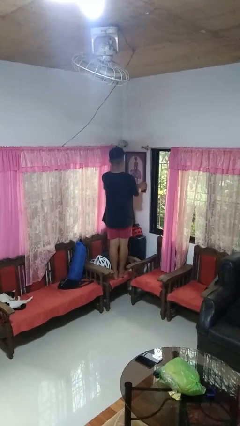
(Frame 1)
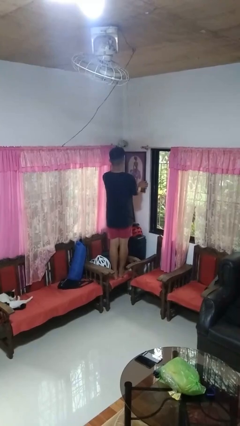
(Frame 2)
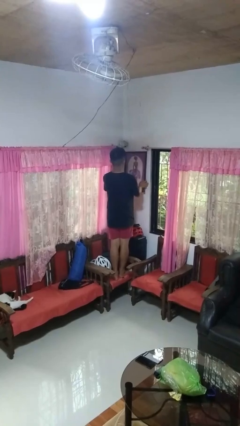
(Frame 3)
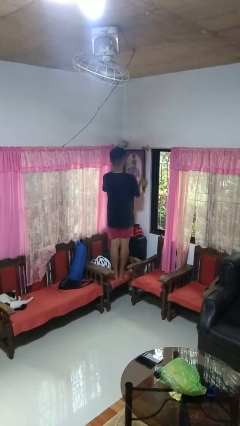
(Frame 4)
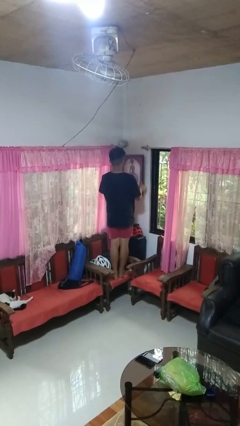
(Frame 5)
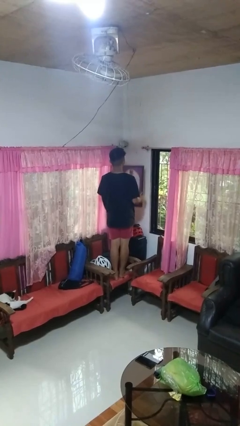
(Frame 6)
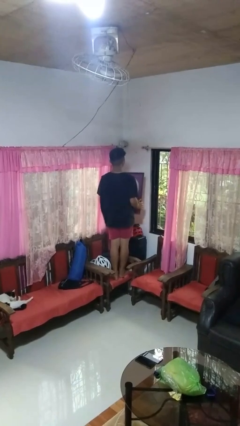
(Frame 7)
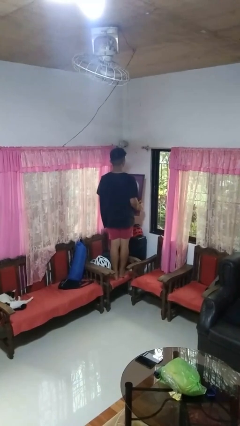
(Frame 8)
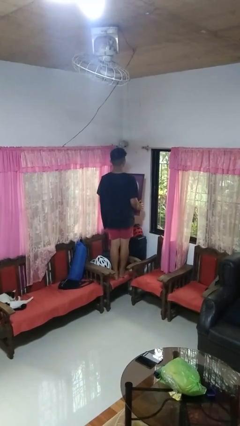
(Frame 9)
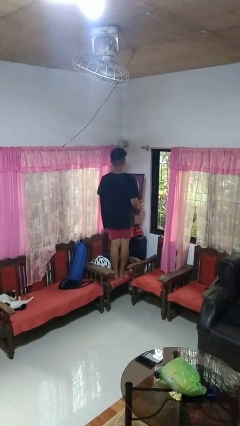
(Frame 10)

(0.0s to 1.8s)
person takes down picture frame

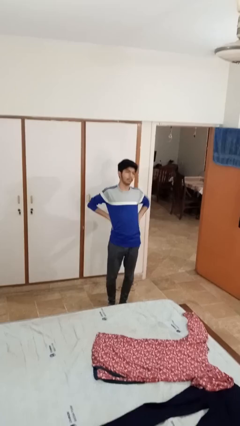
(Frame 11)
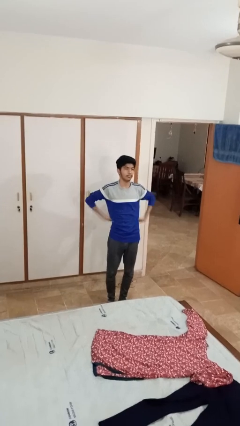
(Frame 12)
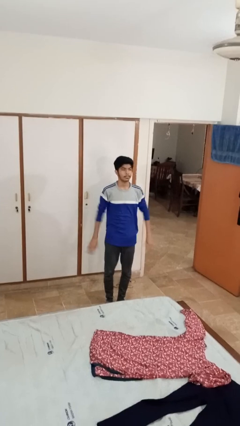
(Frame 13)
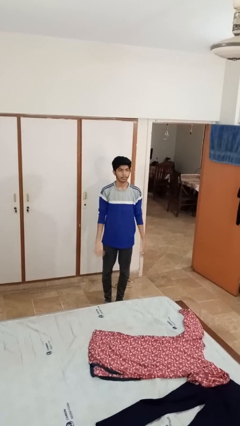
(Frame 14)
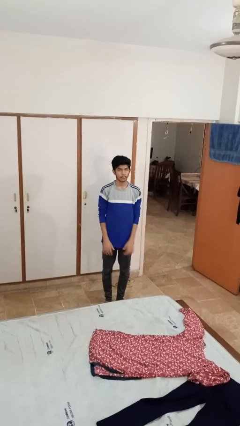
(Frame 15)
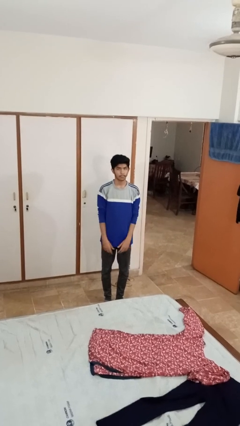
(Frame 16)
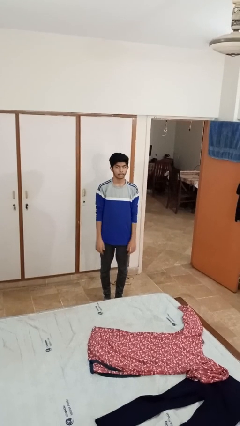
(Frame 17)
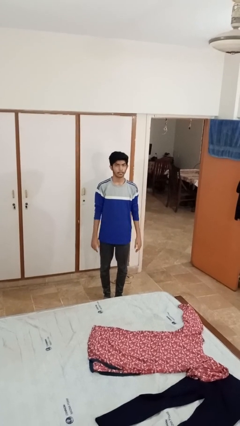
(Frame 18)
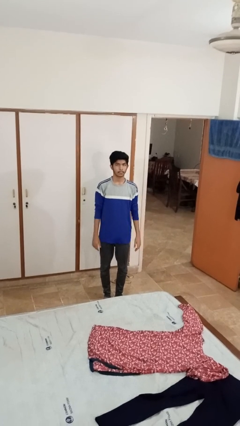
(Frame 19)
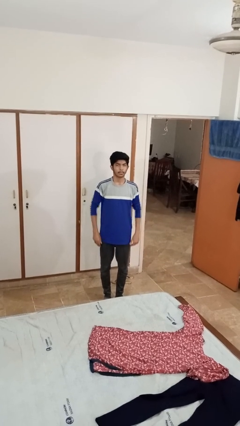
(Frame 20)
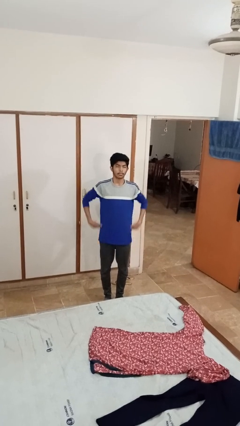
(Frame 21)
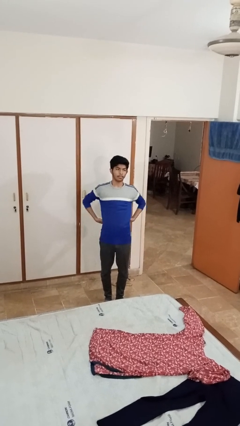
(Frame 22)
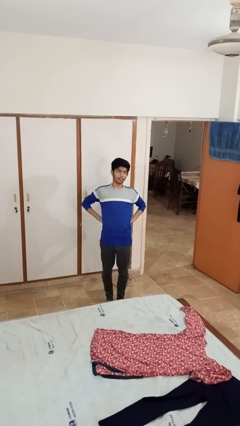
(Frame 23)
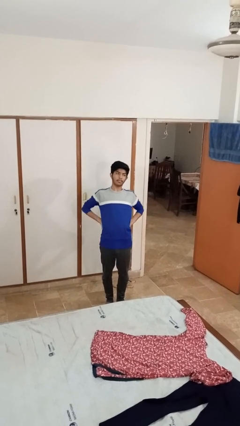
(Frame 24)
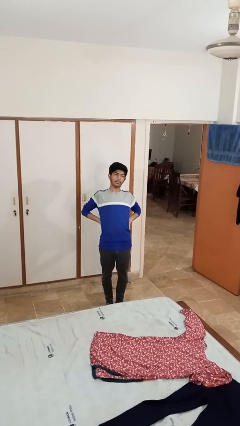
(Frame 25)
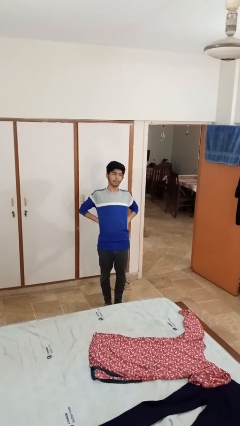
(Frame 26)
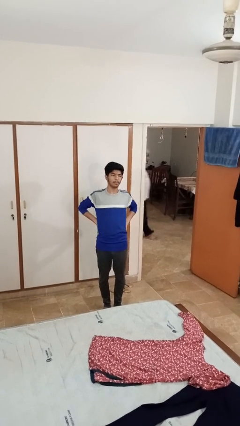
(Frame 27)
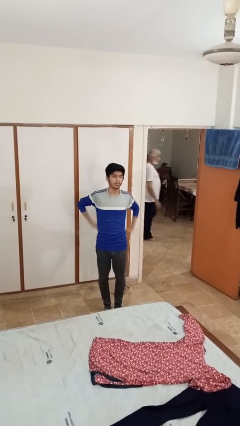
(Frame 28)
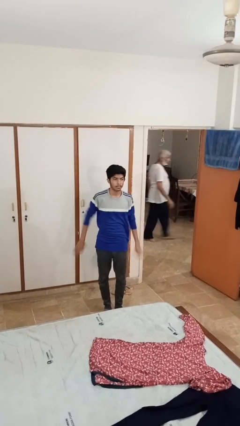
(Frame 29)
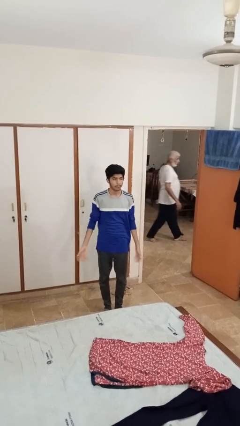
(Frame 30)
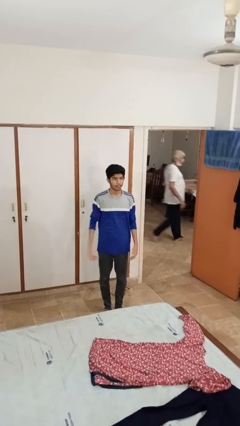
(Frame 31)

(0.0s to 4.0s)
person stretches back

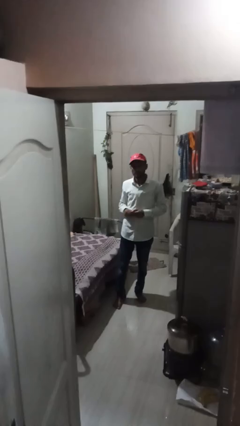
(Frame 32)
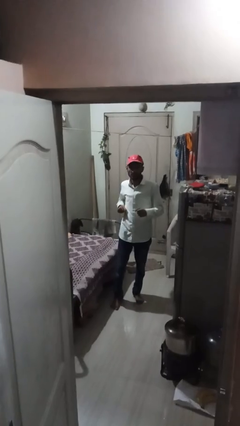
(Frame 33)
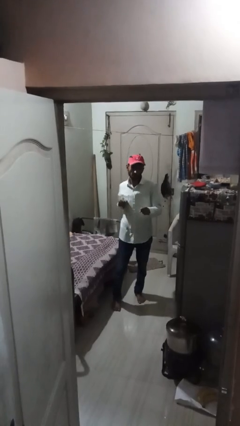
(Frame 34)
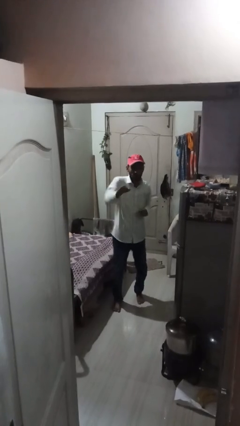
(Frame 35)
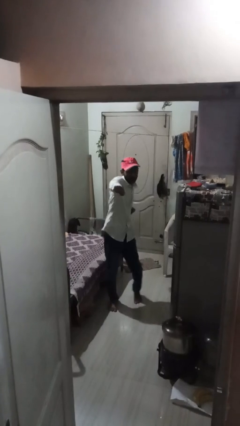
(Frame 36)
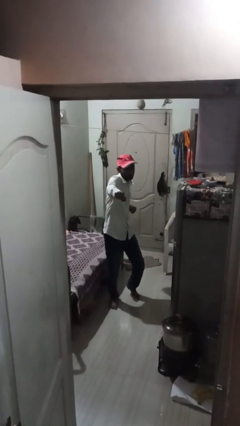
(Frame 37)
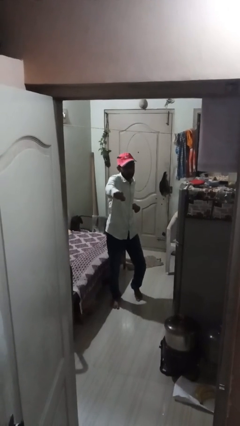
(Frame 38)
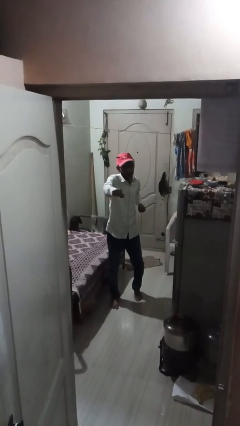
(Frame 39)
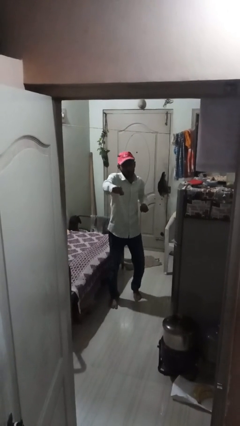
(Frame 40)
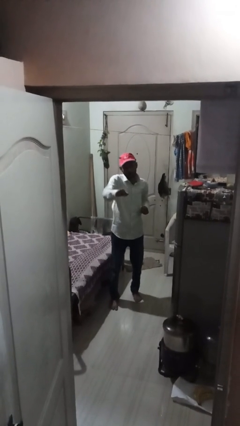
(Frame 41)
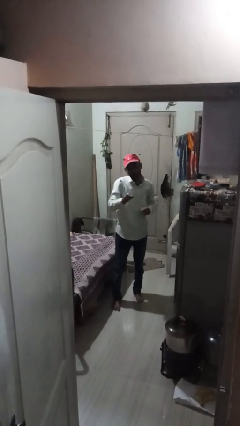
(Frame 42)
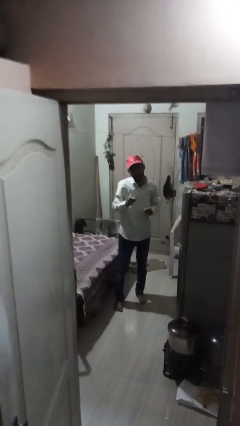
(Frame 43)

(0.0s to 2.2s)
person punches

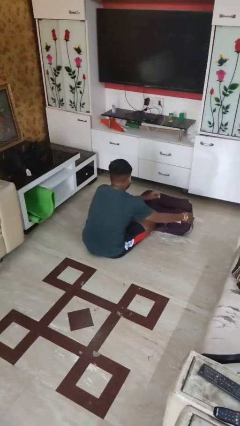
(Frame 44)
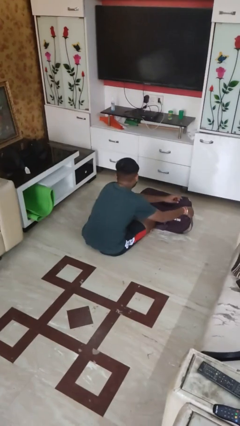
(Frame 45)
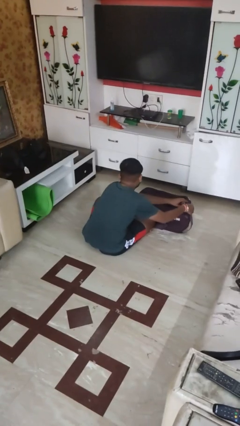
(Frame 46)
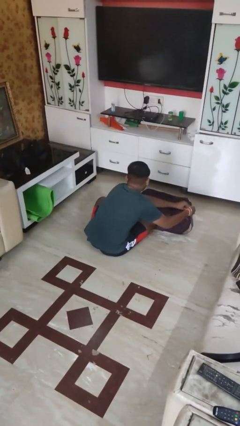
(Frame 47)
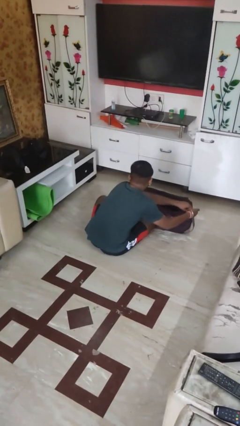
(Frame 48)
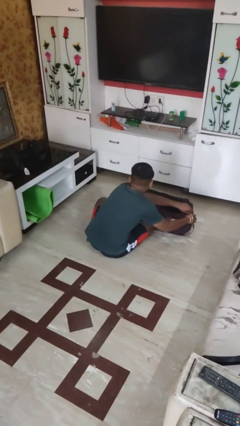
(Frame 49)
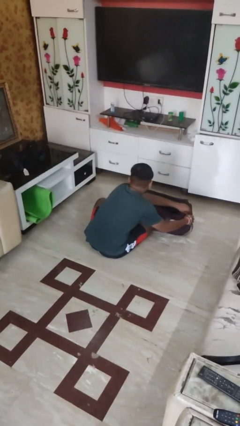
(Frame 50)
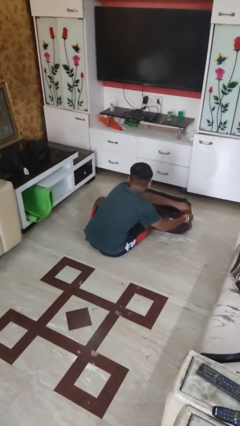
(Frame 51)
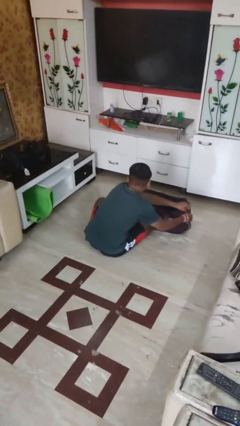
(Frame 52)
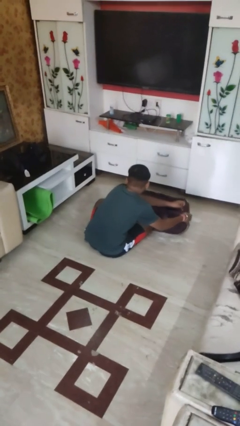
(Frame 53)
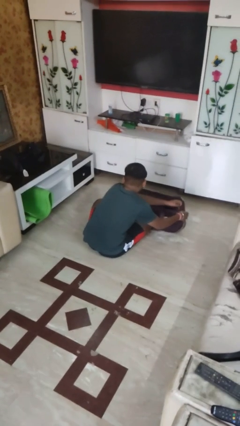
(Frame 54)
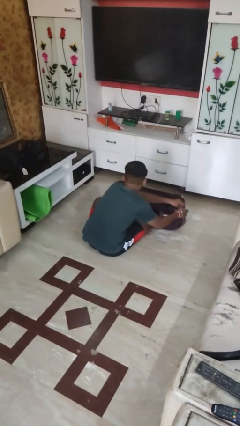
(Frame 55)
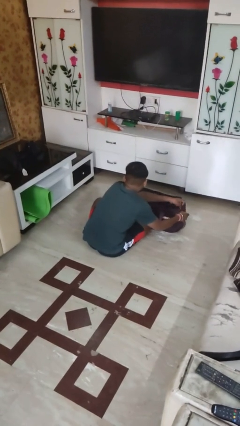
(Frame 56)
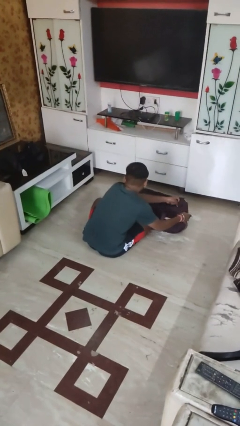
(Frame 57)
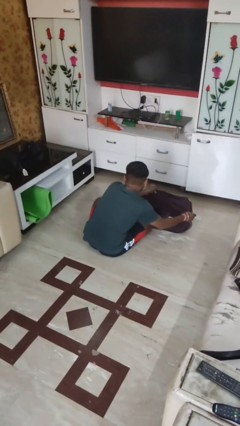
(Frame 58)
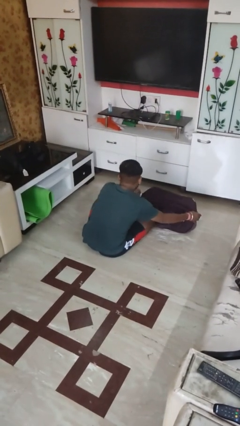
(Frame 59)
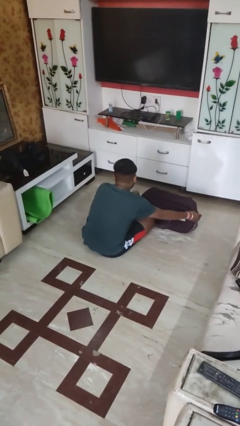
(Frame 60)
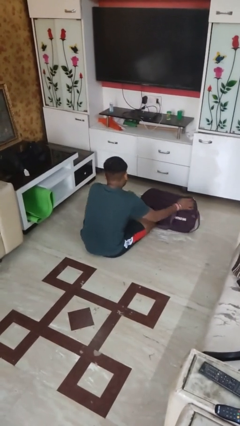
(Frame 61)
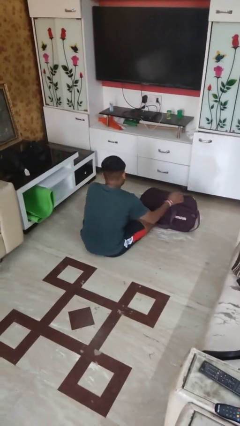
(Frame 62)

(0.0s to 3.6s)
person closes suitcase

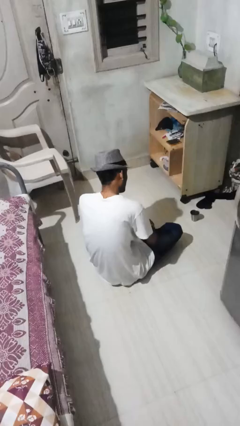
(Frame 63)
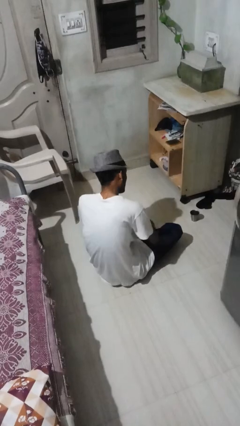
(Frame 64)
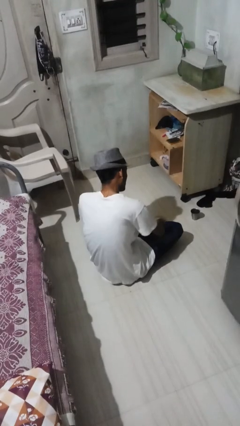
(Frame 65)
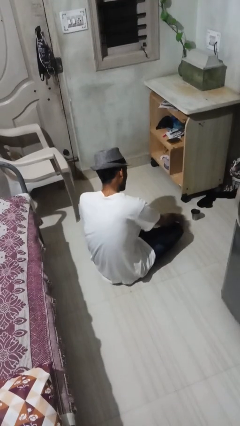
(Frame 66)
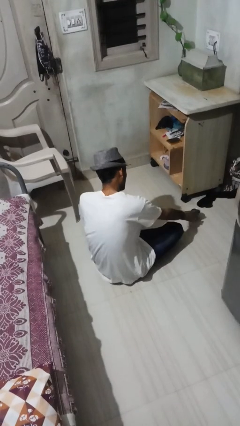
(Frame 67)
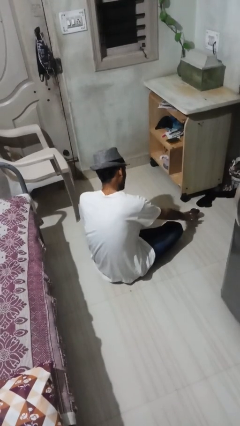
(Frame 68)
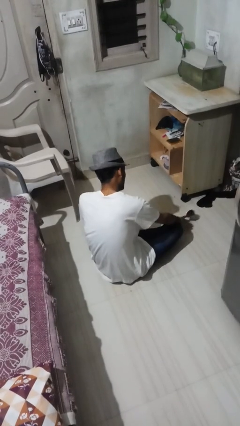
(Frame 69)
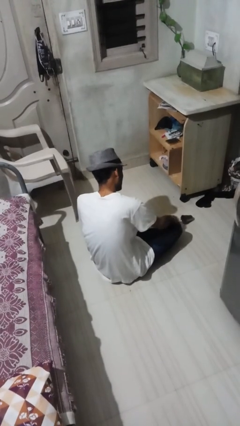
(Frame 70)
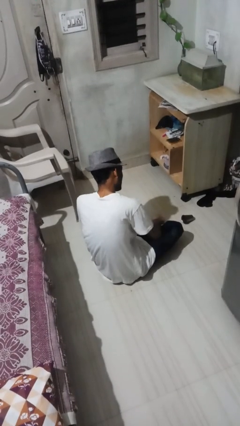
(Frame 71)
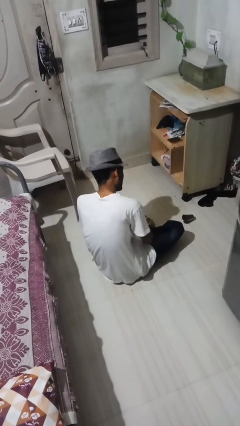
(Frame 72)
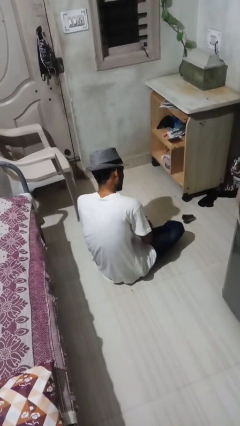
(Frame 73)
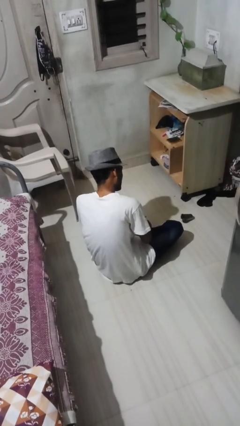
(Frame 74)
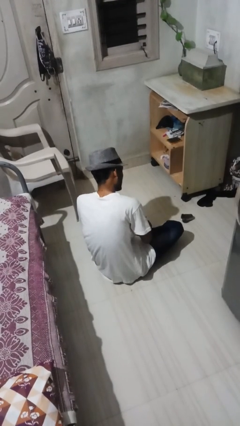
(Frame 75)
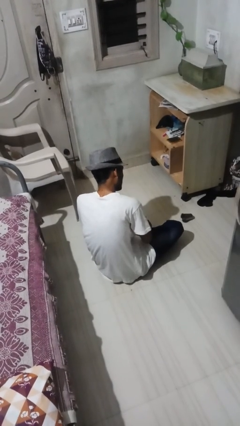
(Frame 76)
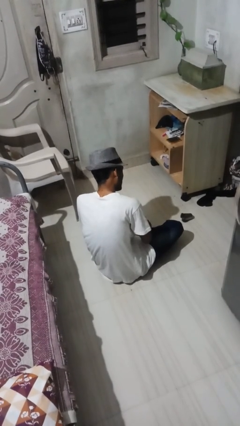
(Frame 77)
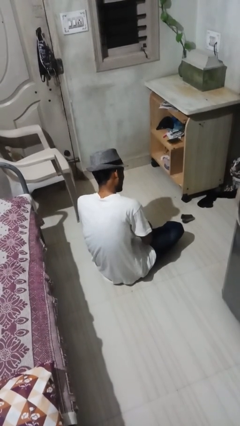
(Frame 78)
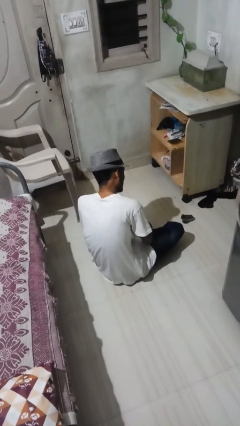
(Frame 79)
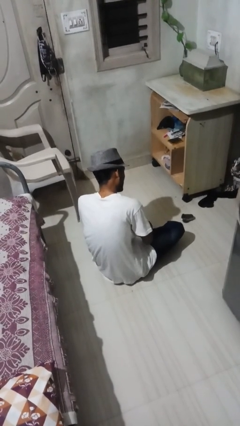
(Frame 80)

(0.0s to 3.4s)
person spills on floor

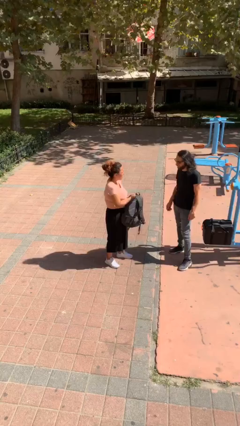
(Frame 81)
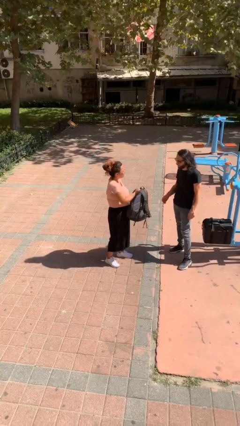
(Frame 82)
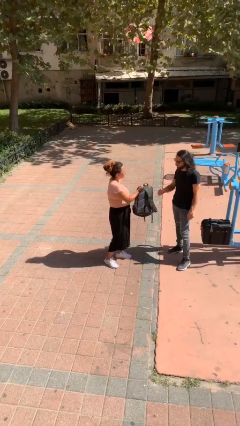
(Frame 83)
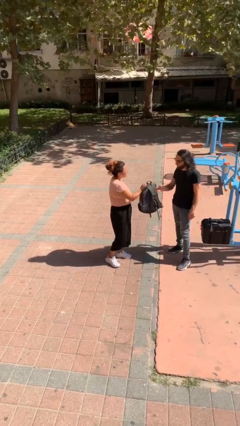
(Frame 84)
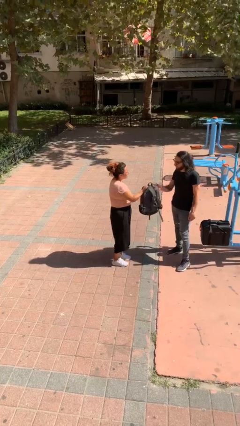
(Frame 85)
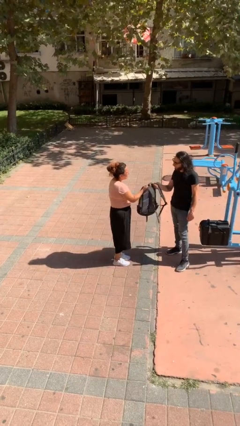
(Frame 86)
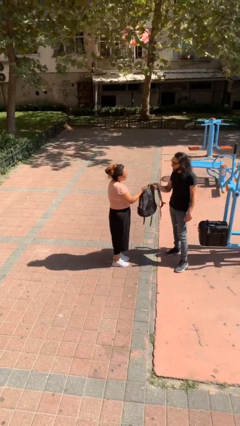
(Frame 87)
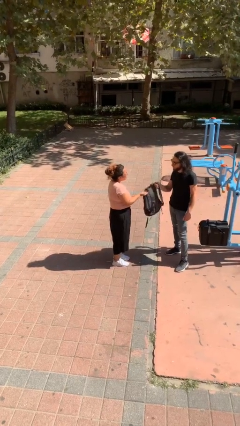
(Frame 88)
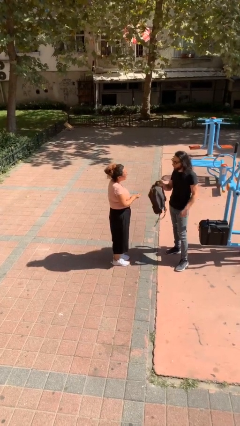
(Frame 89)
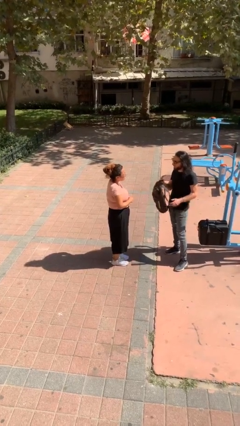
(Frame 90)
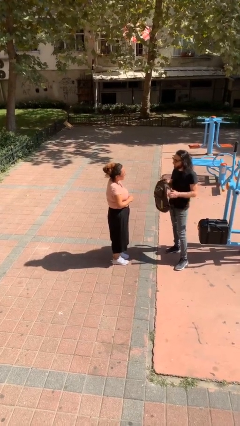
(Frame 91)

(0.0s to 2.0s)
person transfers object to person
